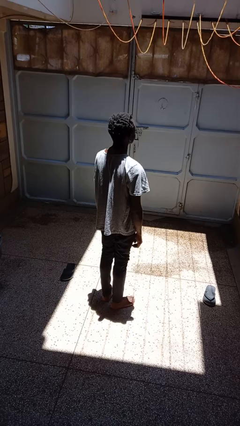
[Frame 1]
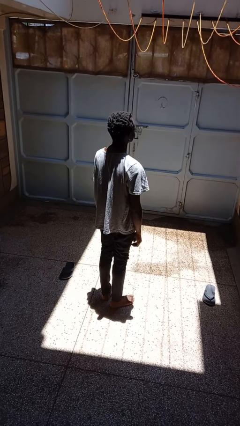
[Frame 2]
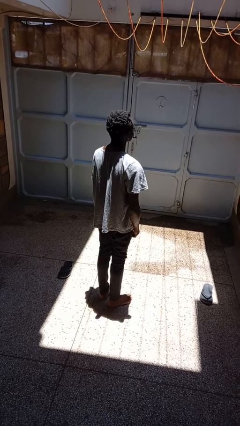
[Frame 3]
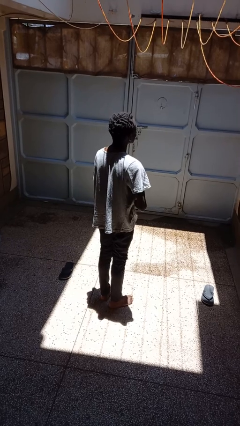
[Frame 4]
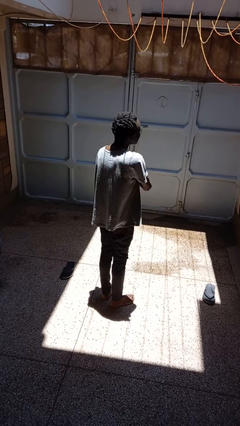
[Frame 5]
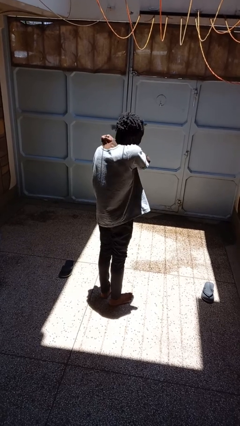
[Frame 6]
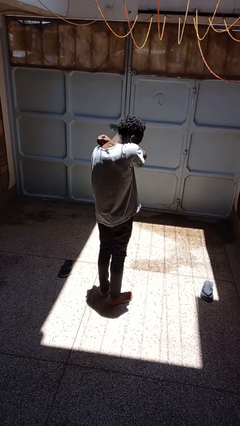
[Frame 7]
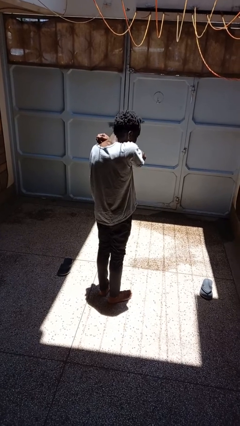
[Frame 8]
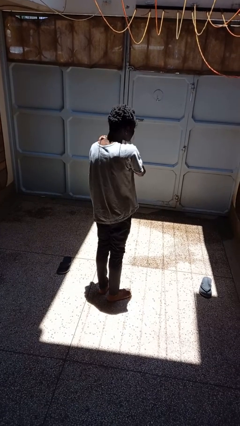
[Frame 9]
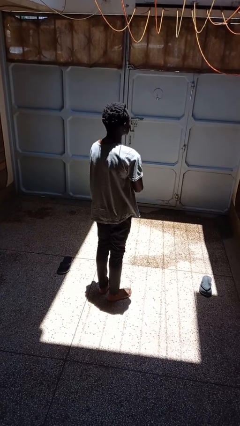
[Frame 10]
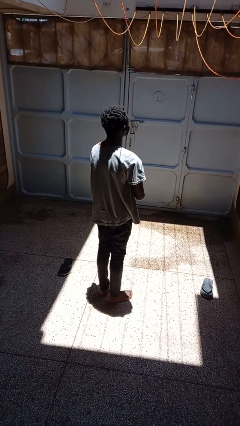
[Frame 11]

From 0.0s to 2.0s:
person sneezes into arm

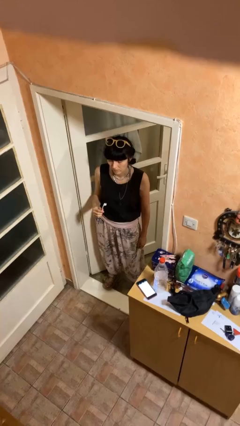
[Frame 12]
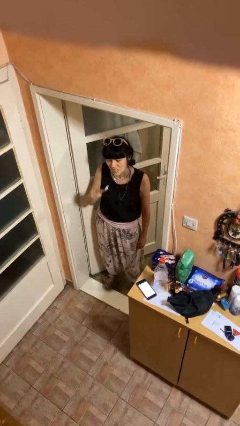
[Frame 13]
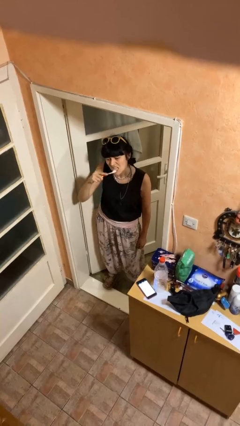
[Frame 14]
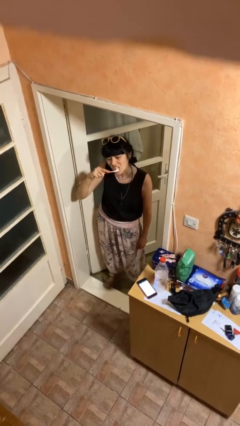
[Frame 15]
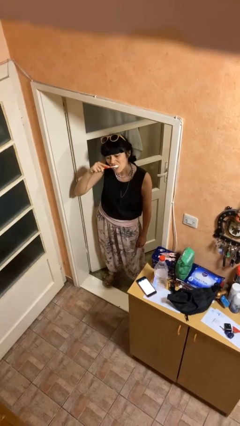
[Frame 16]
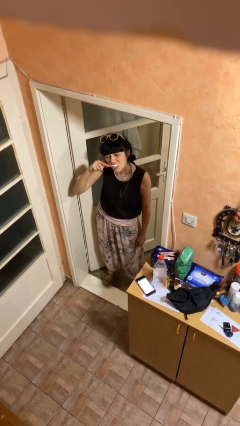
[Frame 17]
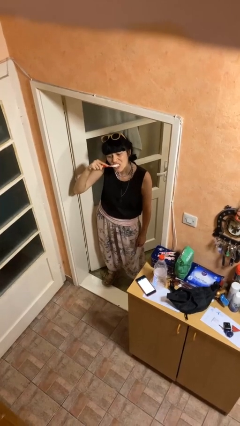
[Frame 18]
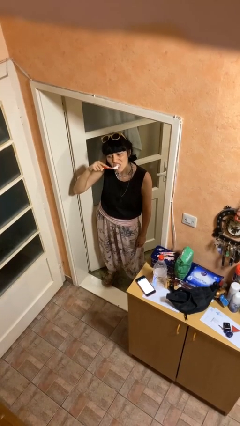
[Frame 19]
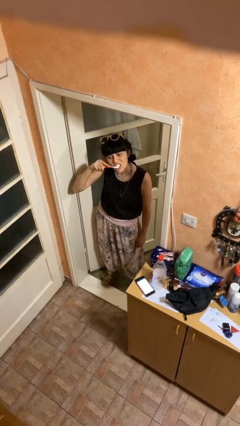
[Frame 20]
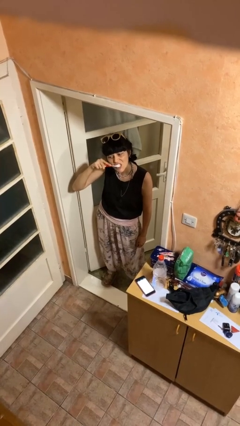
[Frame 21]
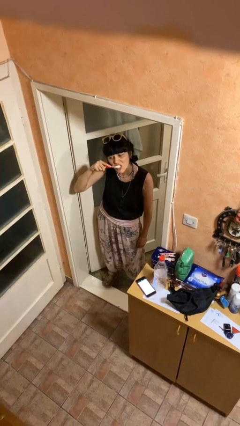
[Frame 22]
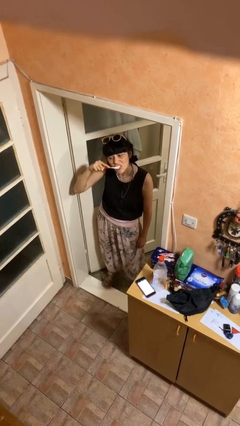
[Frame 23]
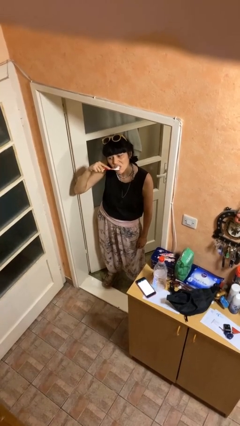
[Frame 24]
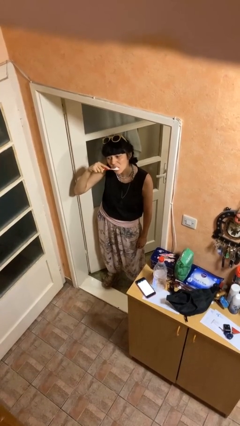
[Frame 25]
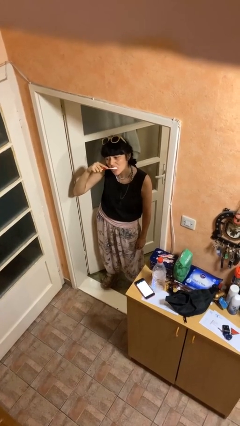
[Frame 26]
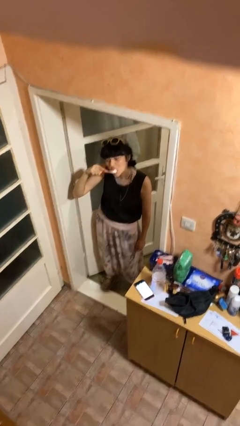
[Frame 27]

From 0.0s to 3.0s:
person brushes teeth

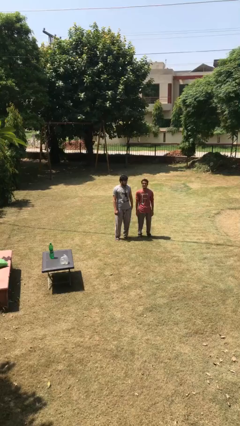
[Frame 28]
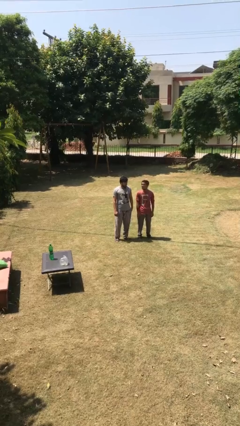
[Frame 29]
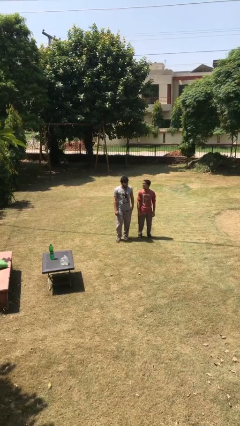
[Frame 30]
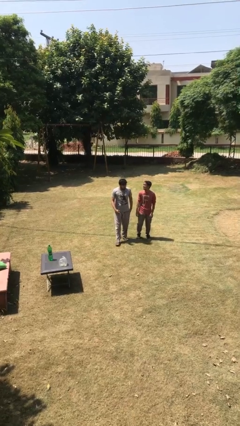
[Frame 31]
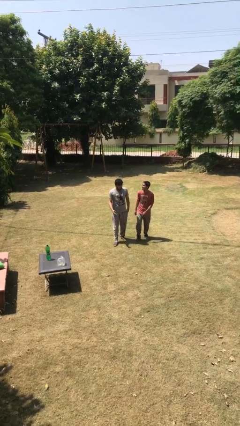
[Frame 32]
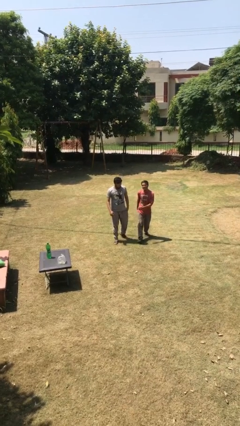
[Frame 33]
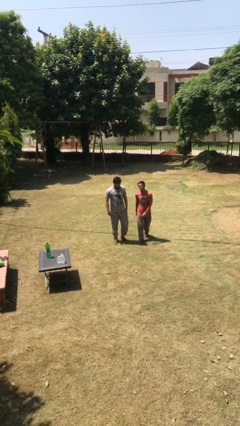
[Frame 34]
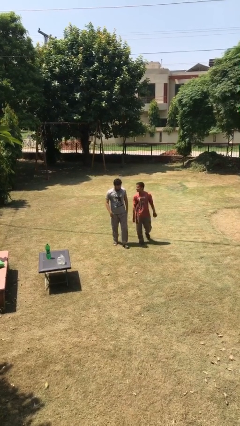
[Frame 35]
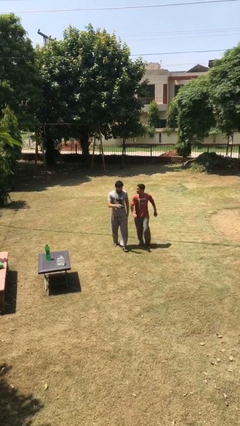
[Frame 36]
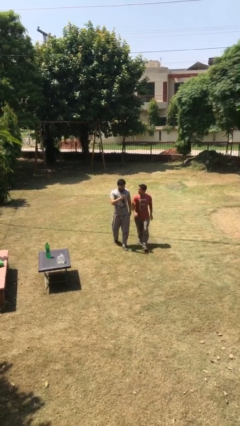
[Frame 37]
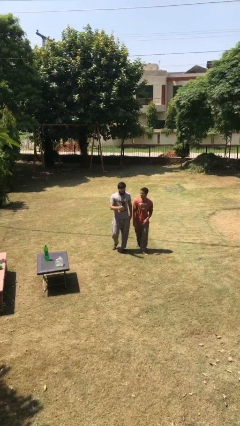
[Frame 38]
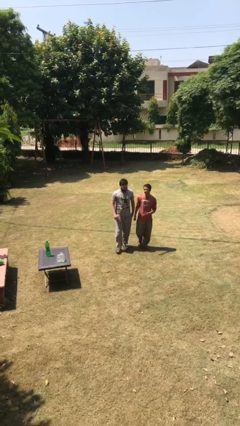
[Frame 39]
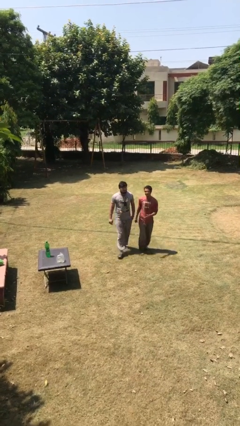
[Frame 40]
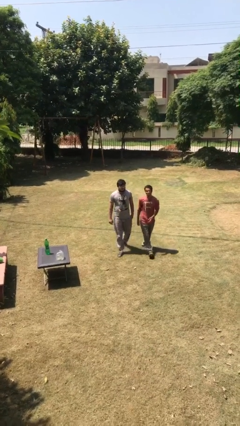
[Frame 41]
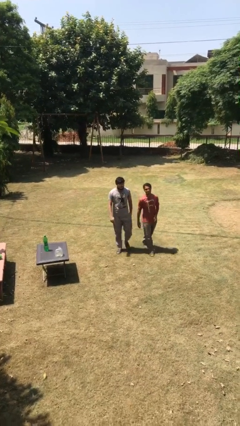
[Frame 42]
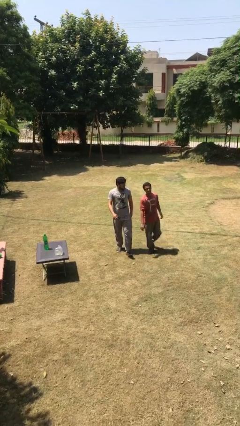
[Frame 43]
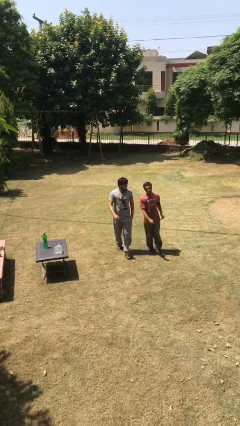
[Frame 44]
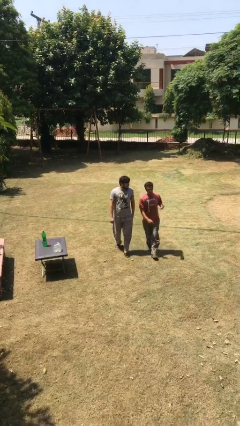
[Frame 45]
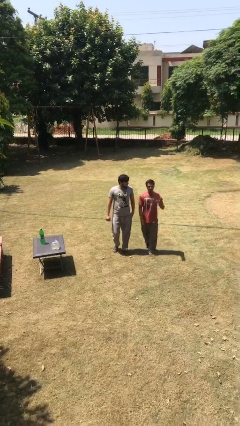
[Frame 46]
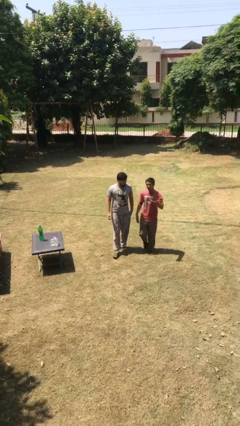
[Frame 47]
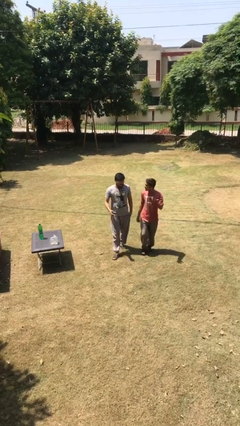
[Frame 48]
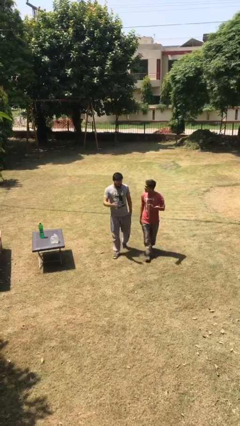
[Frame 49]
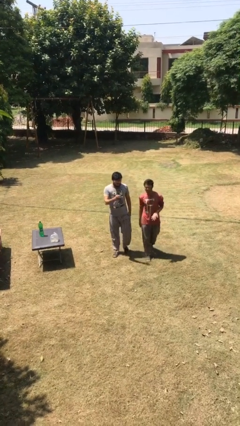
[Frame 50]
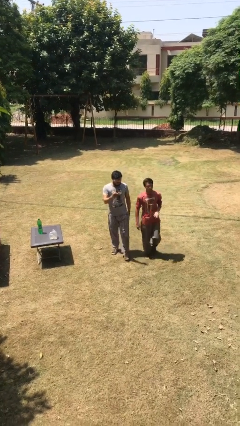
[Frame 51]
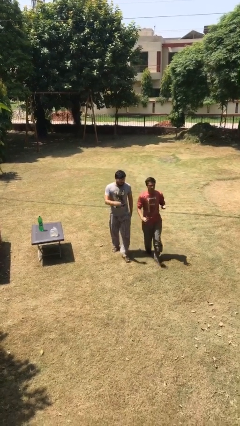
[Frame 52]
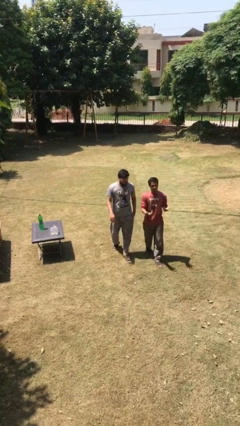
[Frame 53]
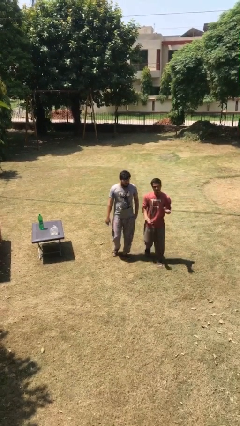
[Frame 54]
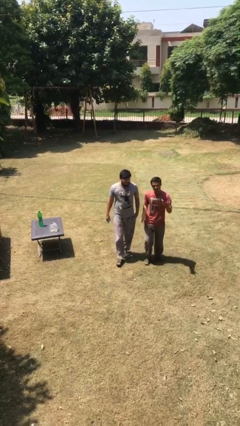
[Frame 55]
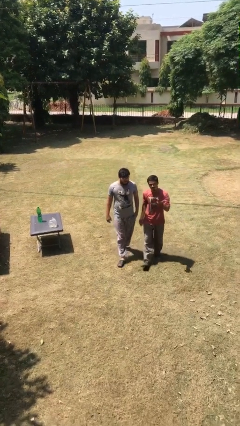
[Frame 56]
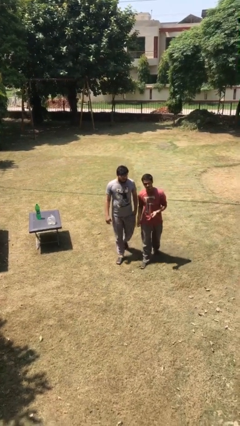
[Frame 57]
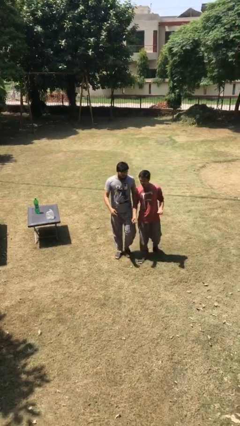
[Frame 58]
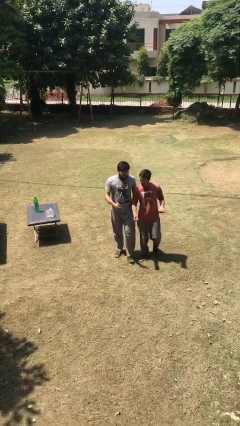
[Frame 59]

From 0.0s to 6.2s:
person talks to person

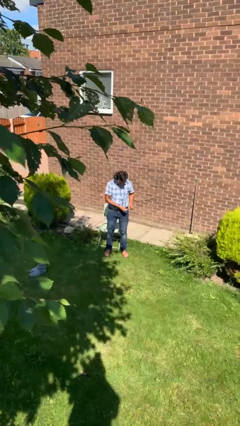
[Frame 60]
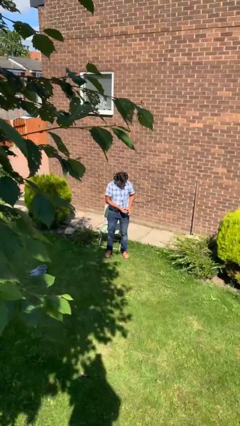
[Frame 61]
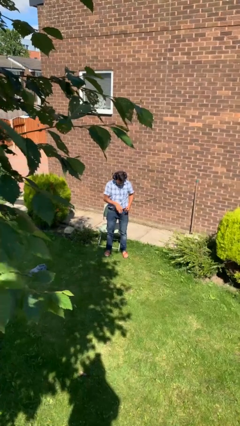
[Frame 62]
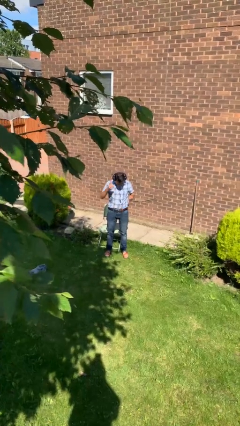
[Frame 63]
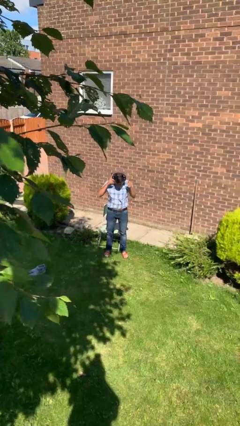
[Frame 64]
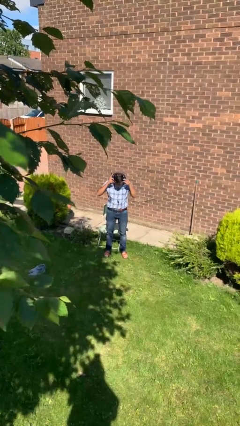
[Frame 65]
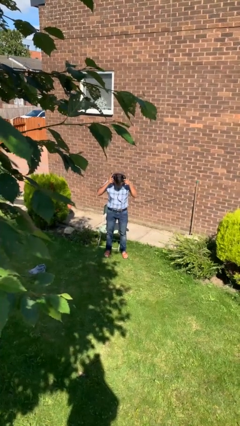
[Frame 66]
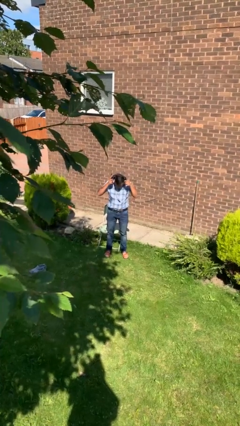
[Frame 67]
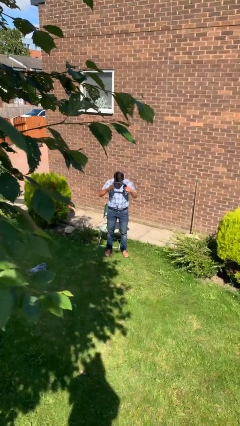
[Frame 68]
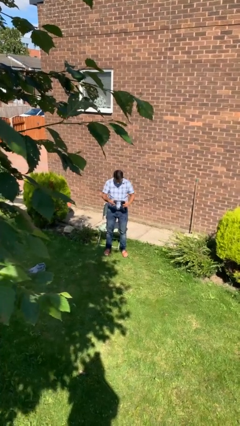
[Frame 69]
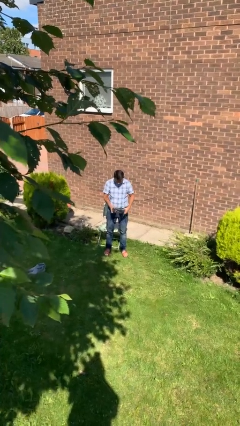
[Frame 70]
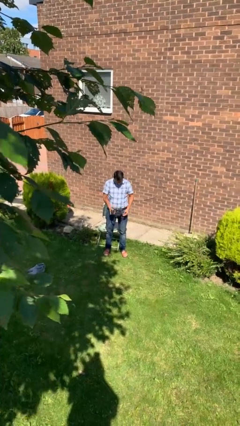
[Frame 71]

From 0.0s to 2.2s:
person takes off headphones

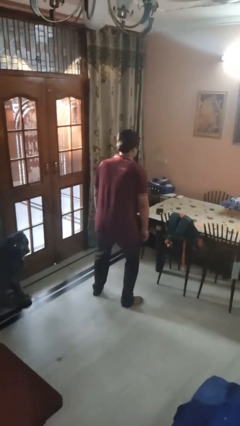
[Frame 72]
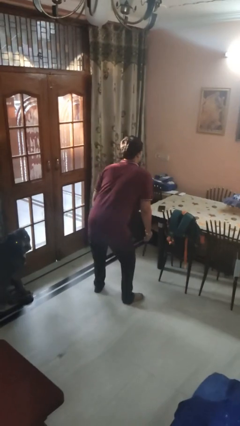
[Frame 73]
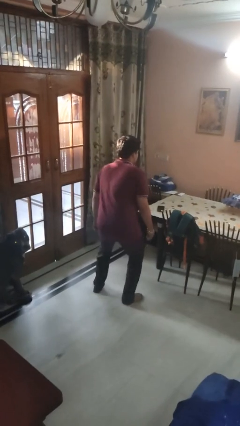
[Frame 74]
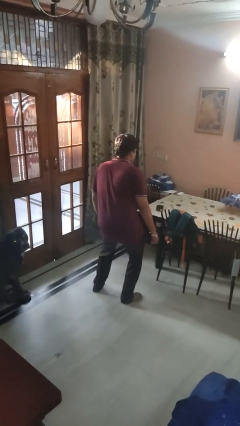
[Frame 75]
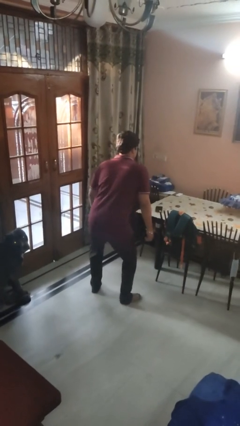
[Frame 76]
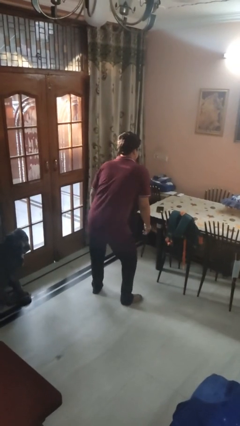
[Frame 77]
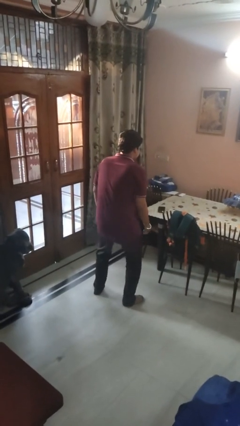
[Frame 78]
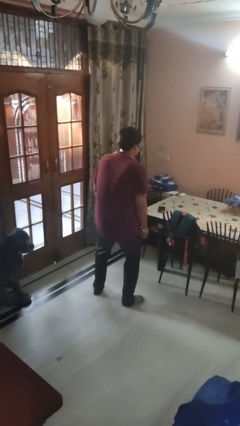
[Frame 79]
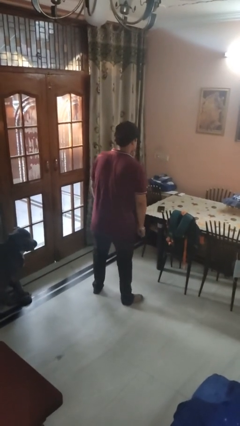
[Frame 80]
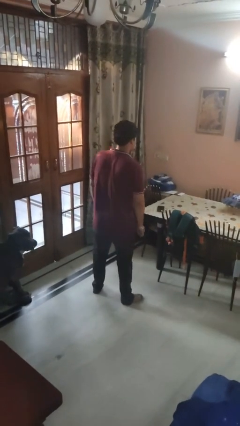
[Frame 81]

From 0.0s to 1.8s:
person wiggles hips

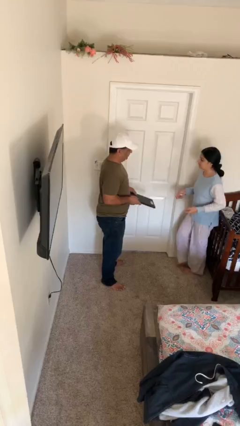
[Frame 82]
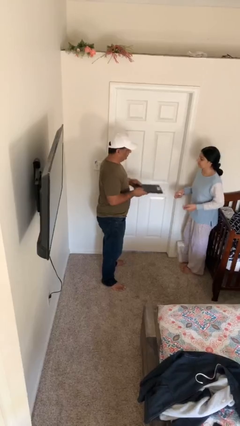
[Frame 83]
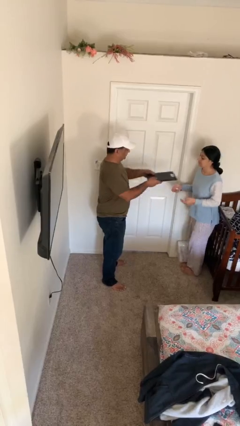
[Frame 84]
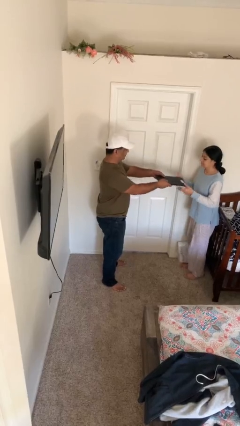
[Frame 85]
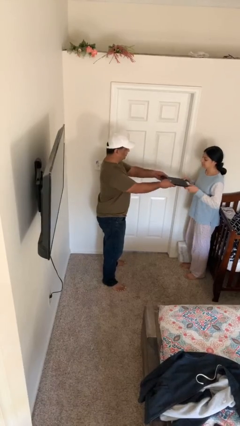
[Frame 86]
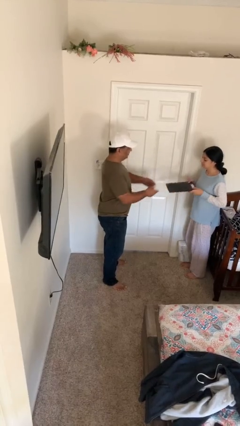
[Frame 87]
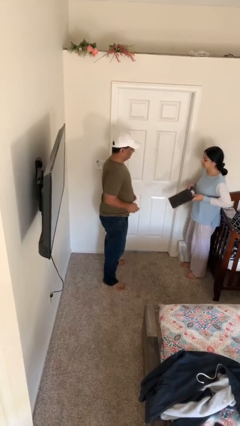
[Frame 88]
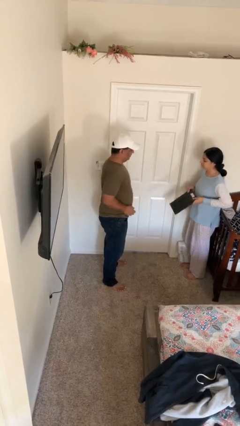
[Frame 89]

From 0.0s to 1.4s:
person transfers object to person

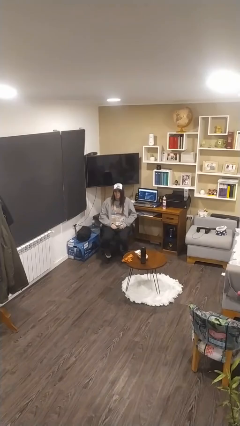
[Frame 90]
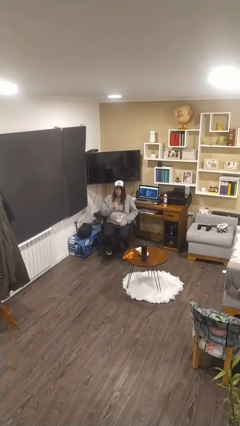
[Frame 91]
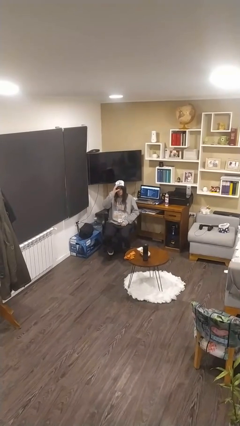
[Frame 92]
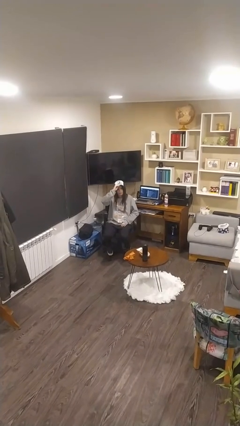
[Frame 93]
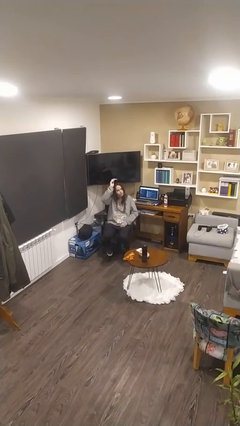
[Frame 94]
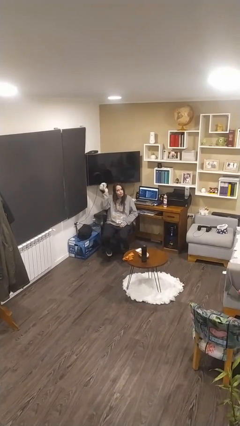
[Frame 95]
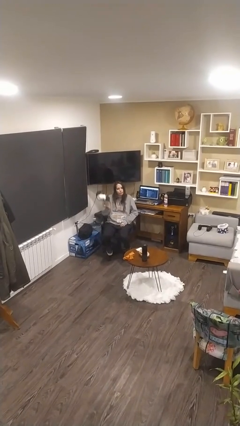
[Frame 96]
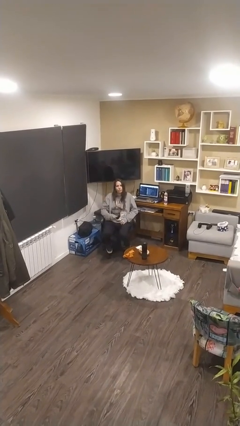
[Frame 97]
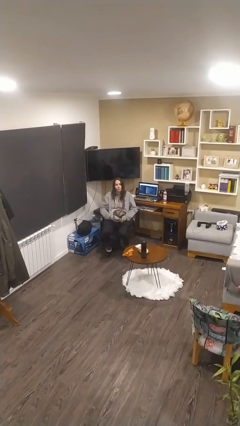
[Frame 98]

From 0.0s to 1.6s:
person takes off hat
